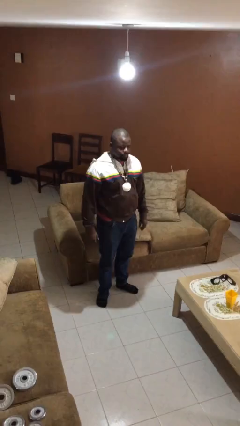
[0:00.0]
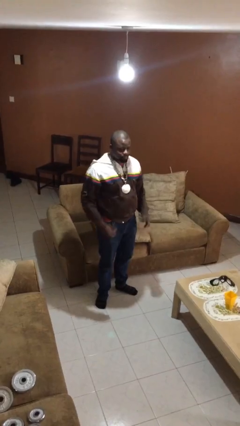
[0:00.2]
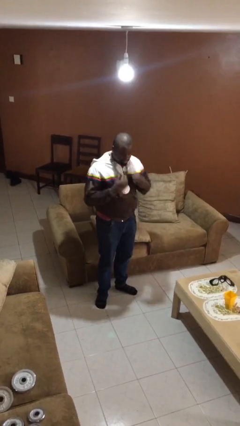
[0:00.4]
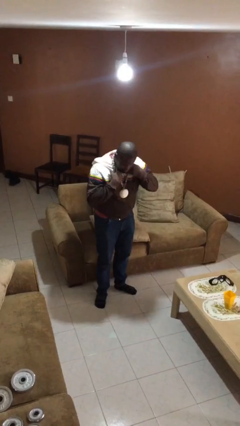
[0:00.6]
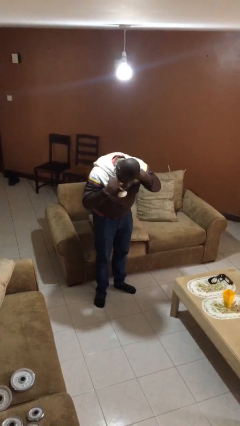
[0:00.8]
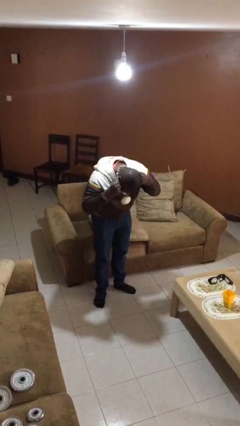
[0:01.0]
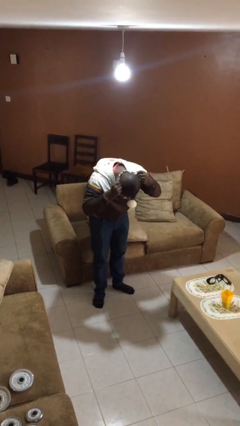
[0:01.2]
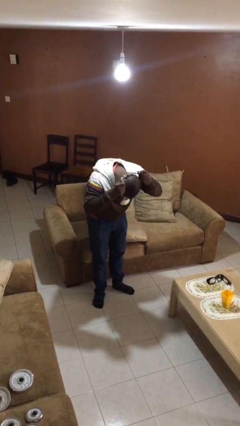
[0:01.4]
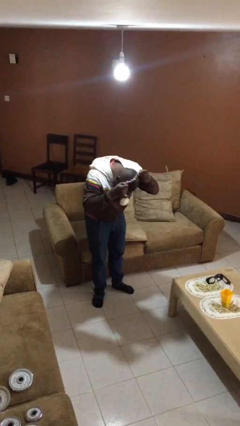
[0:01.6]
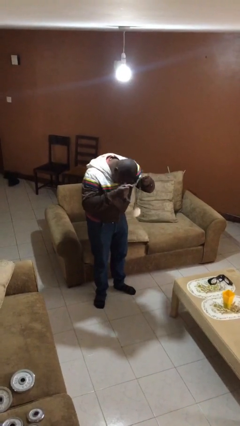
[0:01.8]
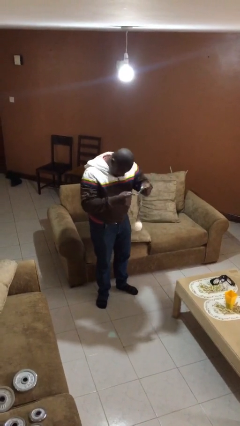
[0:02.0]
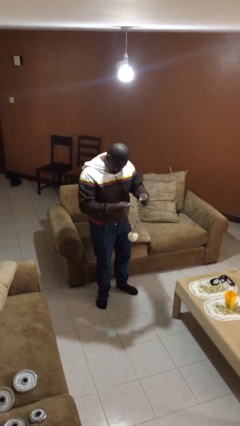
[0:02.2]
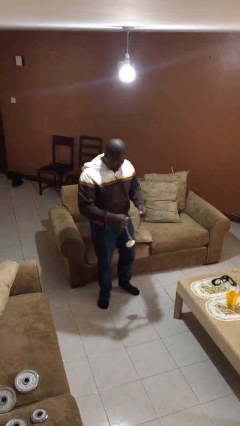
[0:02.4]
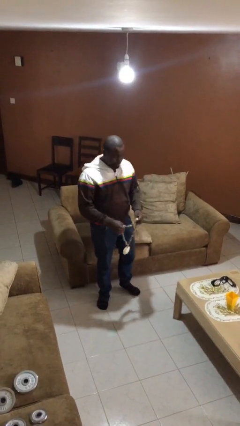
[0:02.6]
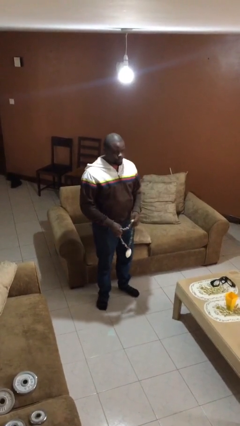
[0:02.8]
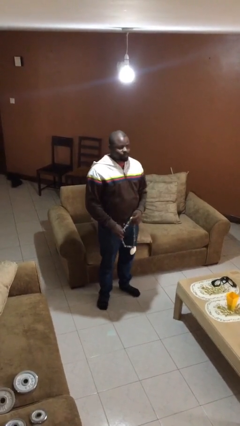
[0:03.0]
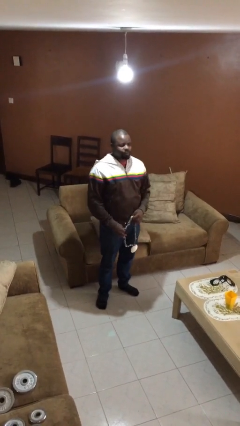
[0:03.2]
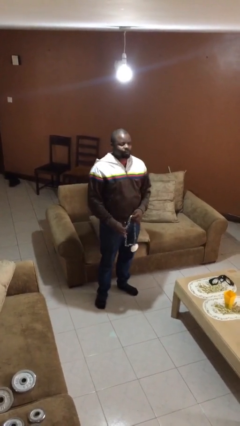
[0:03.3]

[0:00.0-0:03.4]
person takes off necklace

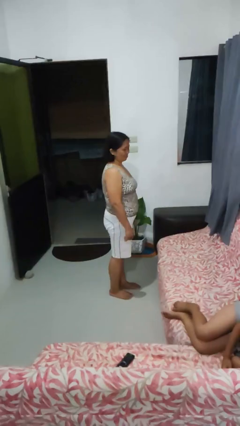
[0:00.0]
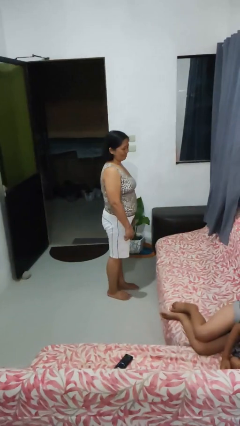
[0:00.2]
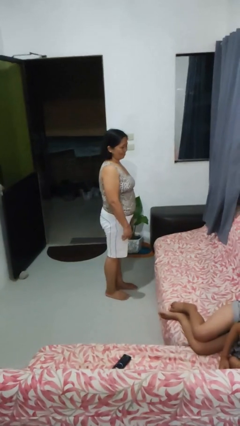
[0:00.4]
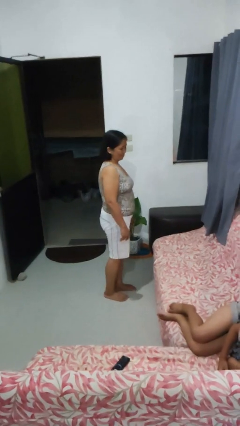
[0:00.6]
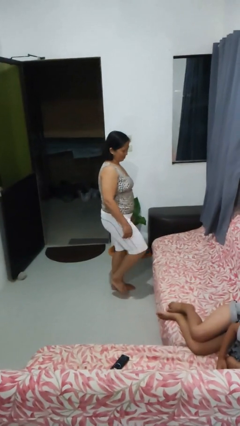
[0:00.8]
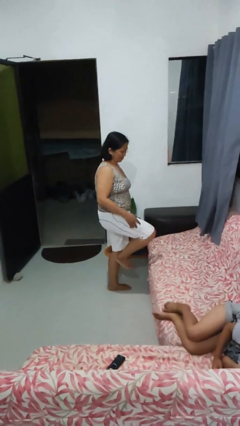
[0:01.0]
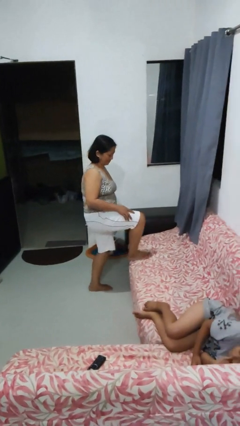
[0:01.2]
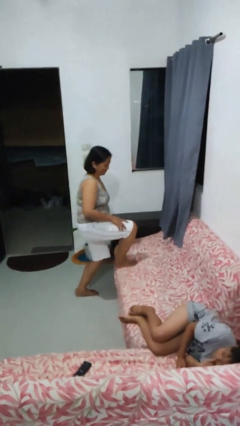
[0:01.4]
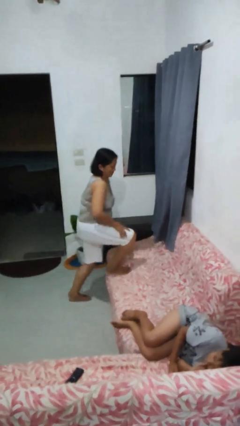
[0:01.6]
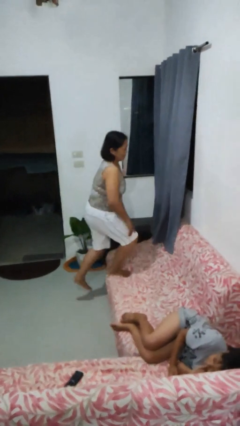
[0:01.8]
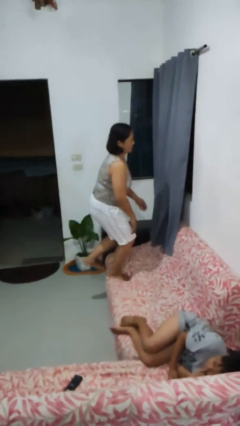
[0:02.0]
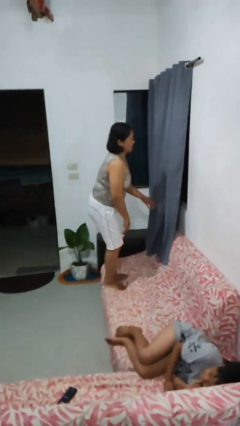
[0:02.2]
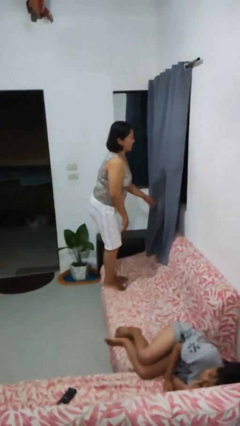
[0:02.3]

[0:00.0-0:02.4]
person climbs on couch

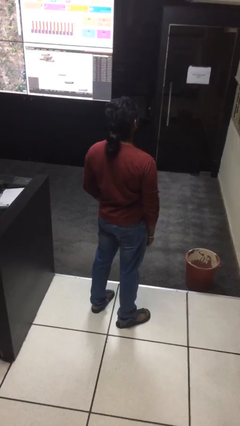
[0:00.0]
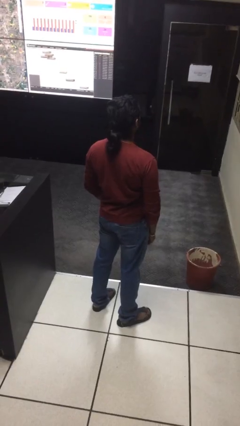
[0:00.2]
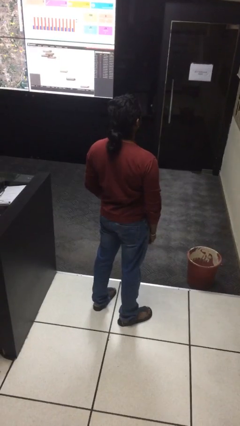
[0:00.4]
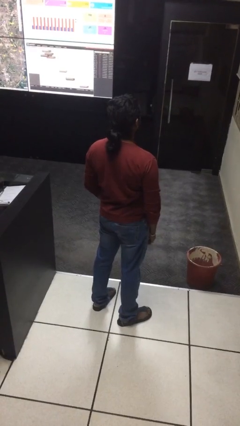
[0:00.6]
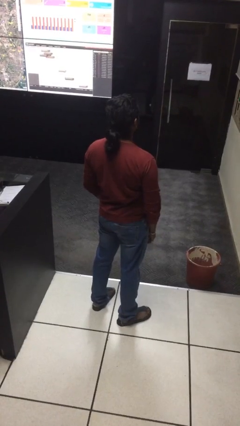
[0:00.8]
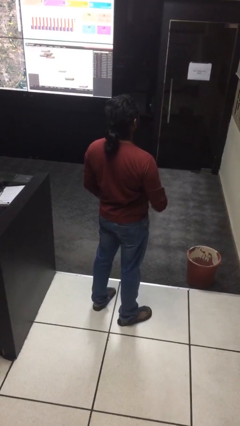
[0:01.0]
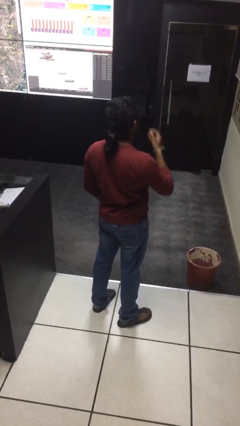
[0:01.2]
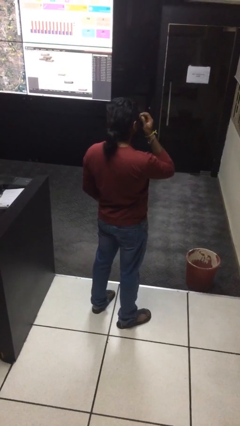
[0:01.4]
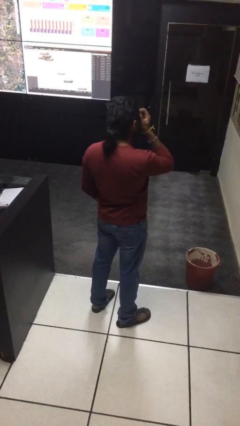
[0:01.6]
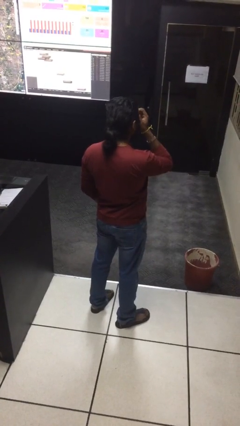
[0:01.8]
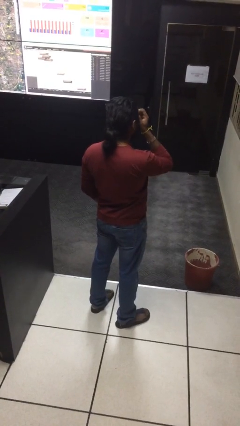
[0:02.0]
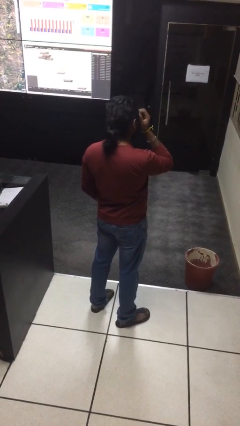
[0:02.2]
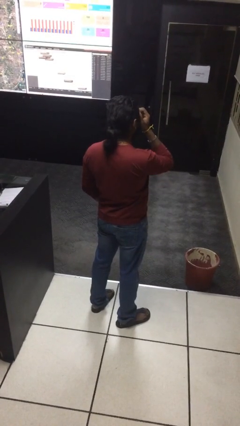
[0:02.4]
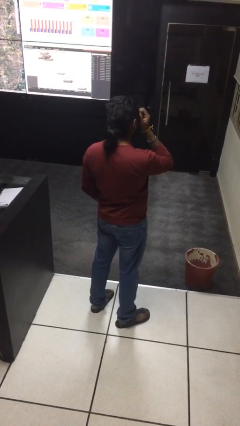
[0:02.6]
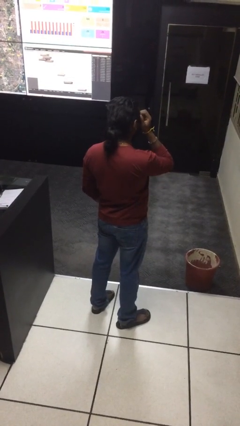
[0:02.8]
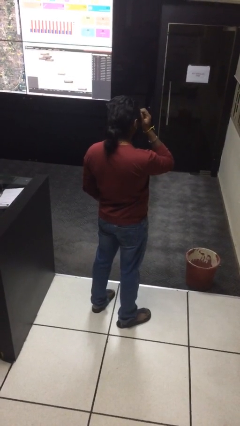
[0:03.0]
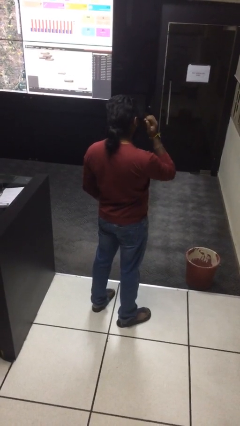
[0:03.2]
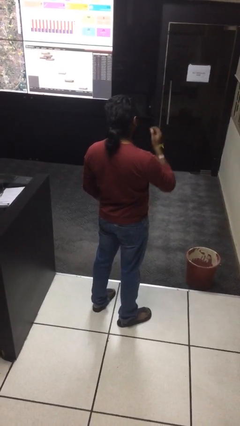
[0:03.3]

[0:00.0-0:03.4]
person scratches face

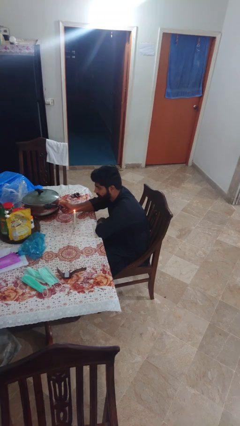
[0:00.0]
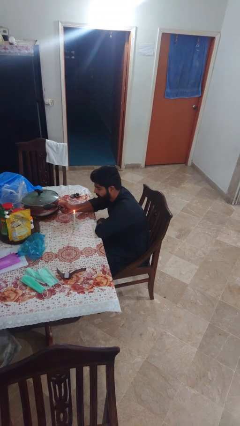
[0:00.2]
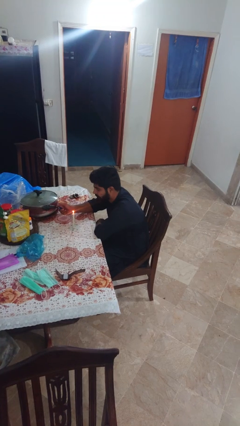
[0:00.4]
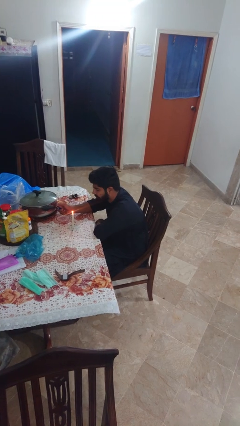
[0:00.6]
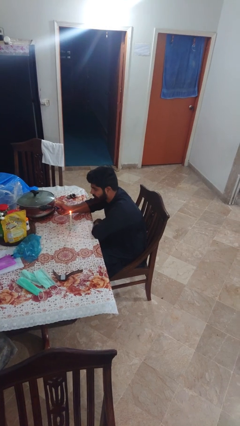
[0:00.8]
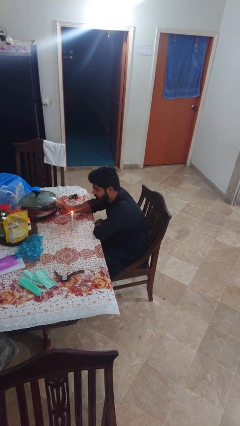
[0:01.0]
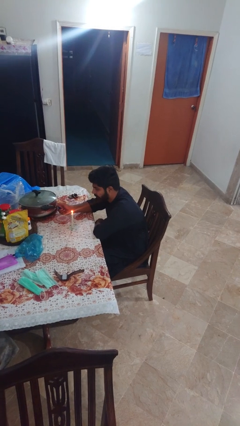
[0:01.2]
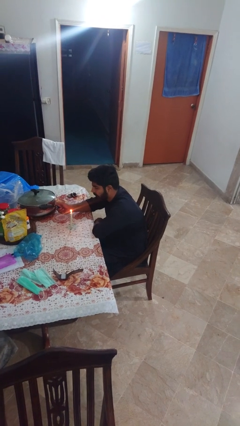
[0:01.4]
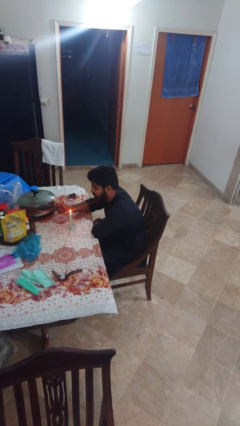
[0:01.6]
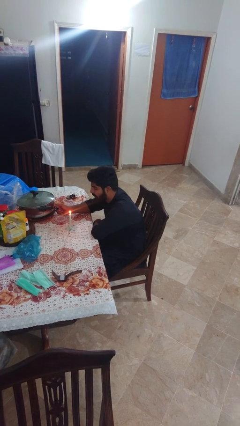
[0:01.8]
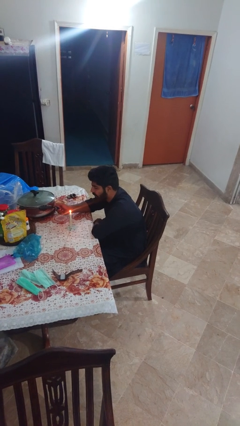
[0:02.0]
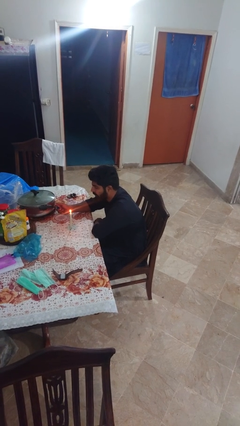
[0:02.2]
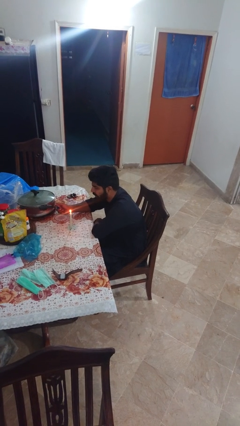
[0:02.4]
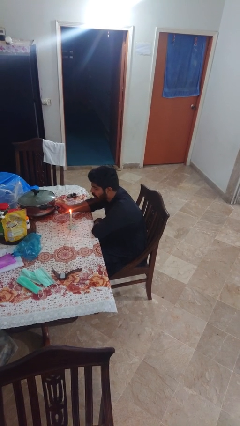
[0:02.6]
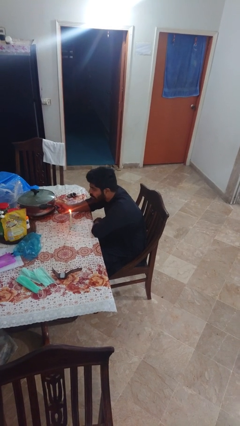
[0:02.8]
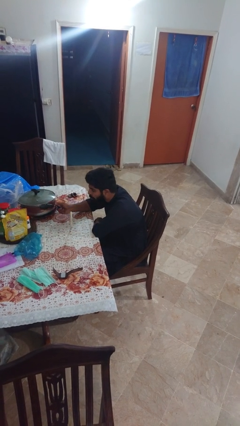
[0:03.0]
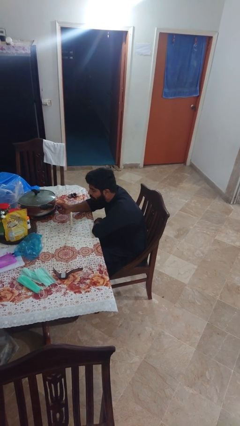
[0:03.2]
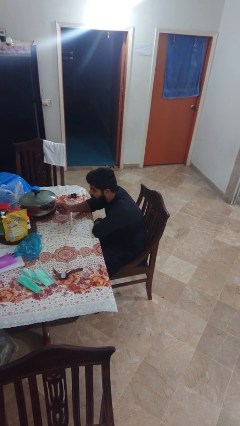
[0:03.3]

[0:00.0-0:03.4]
person extinguishes candle

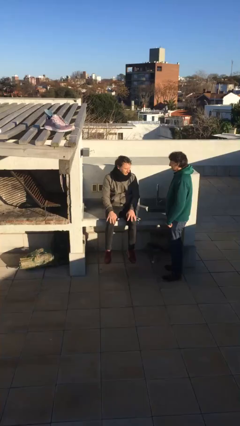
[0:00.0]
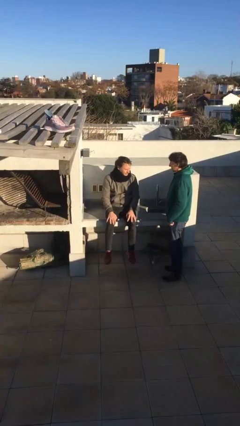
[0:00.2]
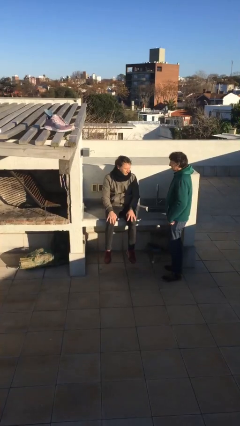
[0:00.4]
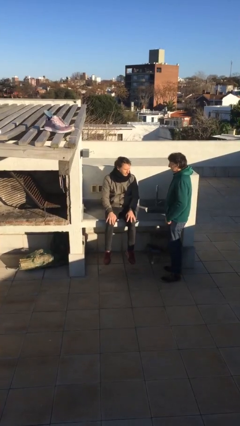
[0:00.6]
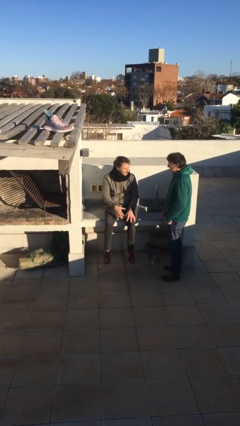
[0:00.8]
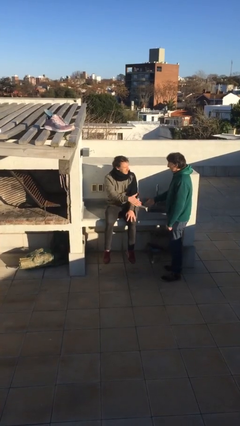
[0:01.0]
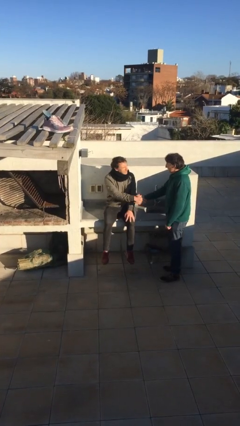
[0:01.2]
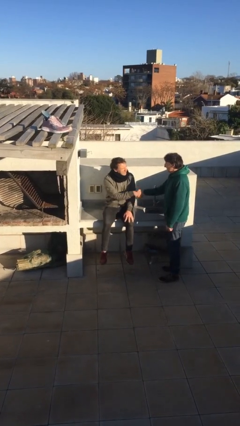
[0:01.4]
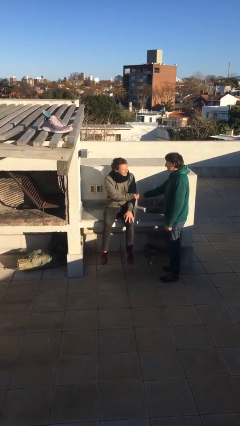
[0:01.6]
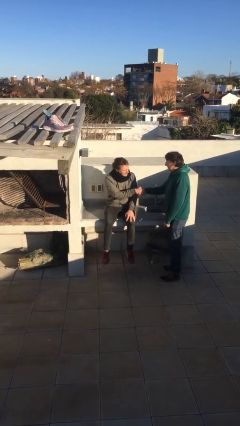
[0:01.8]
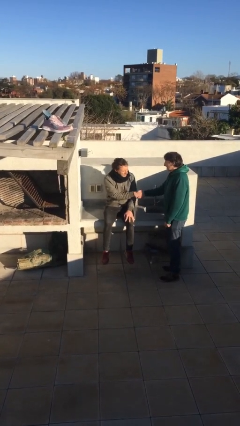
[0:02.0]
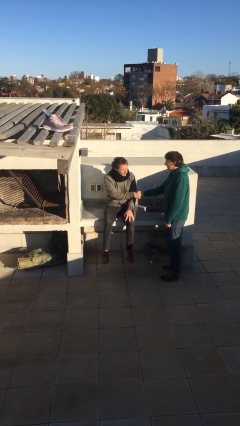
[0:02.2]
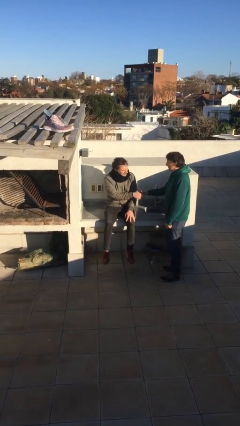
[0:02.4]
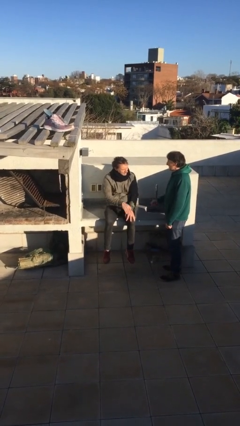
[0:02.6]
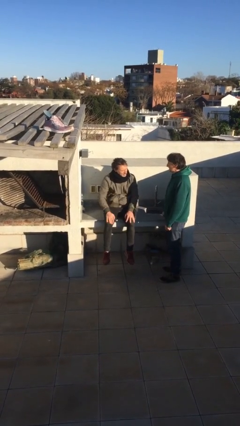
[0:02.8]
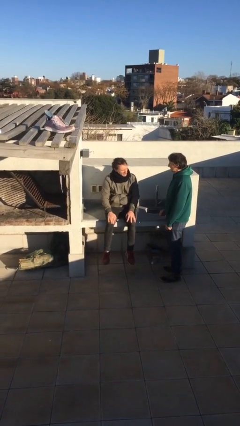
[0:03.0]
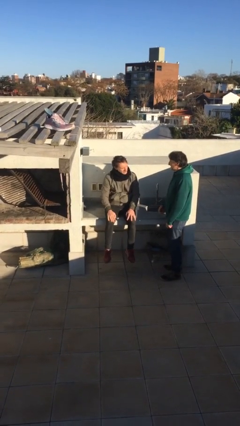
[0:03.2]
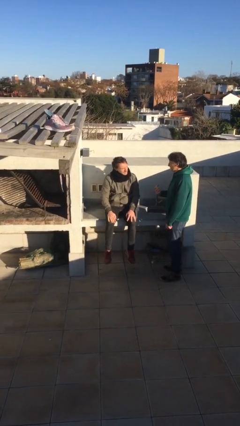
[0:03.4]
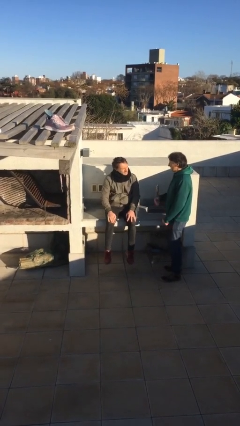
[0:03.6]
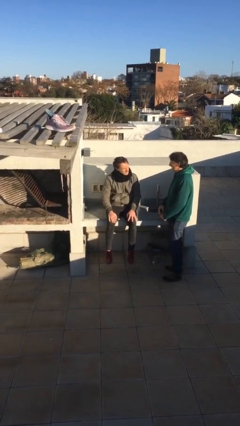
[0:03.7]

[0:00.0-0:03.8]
person shakes hand

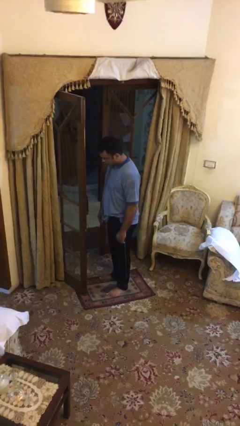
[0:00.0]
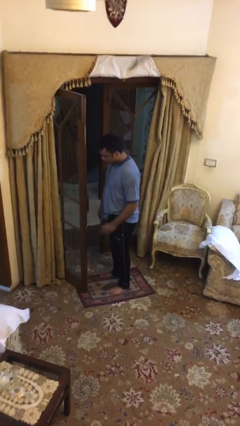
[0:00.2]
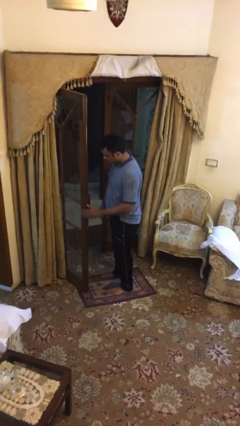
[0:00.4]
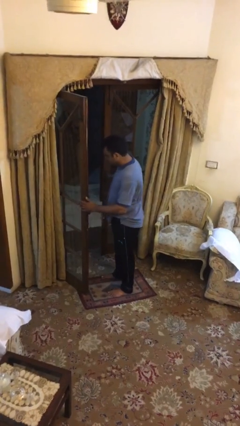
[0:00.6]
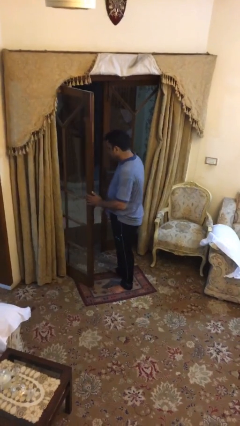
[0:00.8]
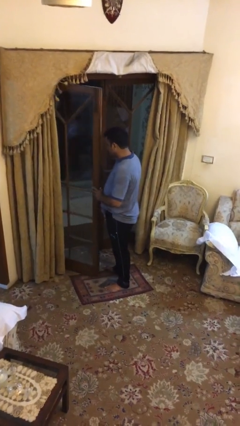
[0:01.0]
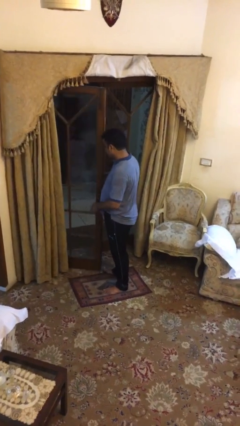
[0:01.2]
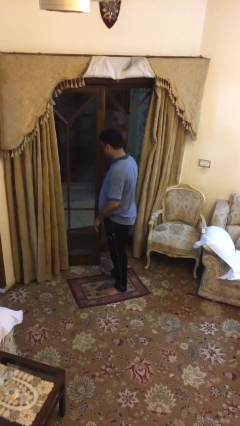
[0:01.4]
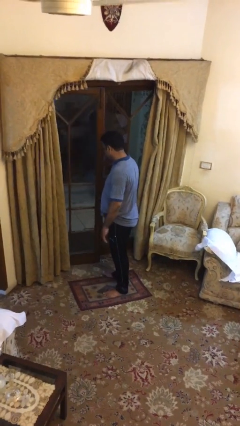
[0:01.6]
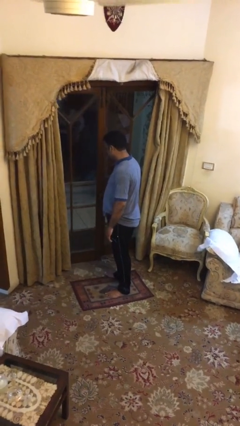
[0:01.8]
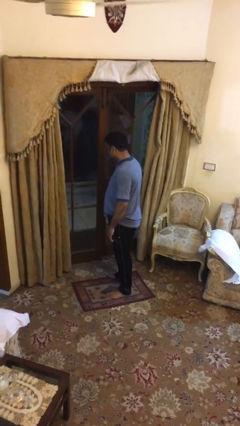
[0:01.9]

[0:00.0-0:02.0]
person closes facility door
